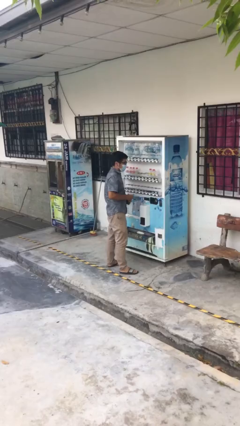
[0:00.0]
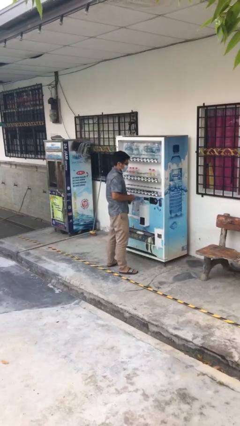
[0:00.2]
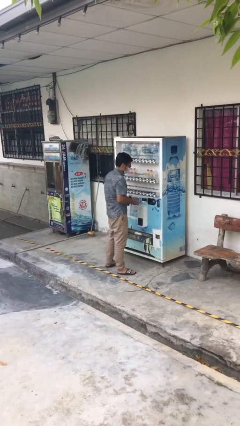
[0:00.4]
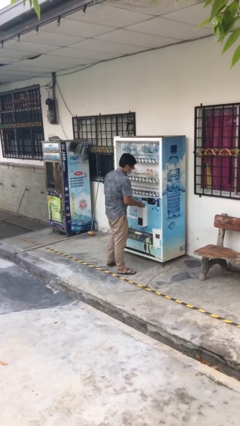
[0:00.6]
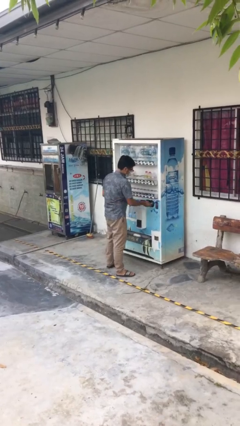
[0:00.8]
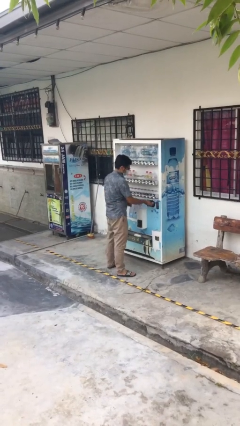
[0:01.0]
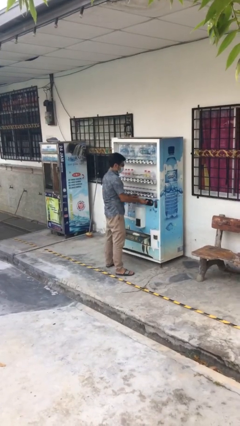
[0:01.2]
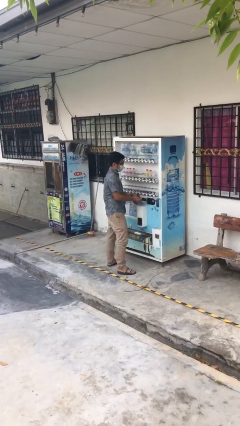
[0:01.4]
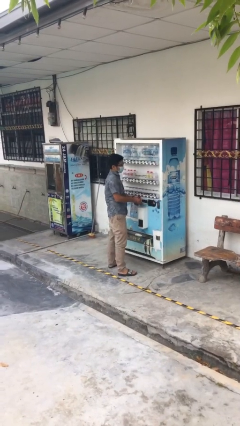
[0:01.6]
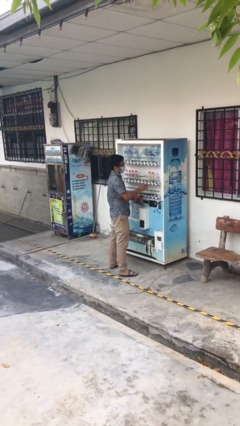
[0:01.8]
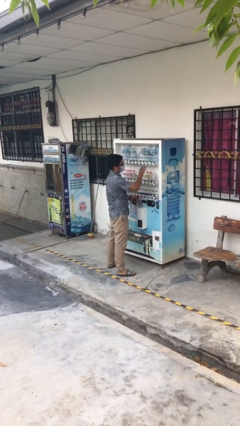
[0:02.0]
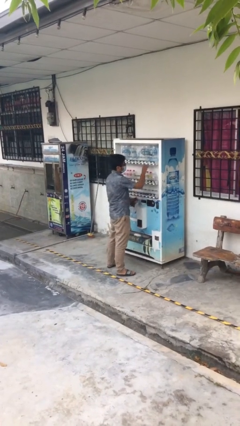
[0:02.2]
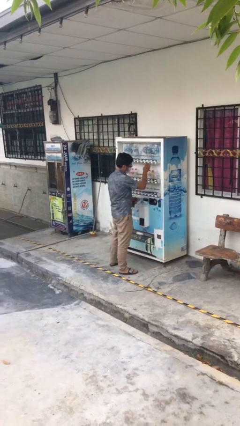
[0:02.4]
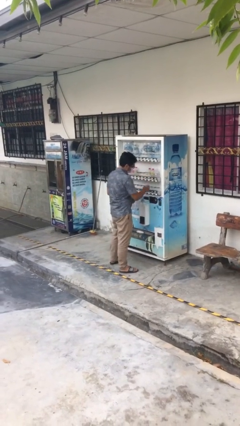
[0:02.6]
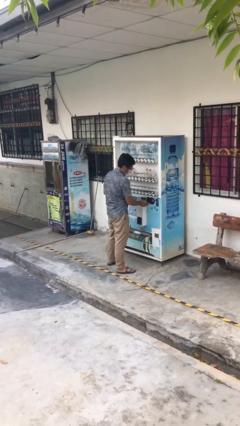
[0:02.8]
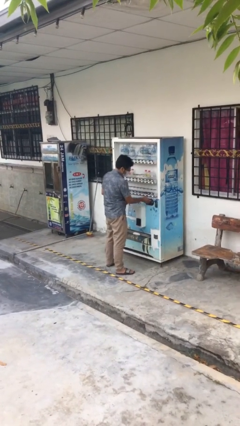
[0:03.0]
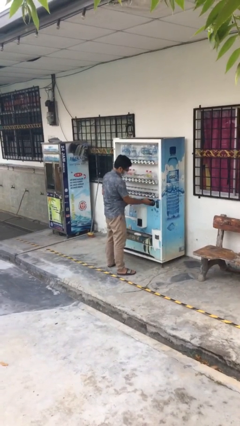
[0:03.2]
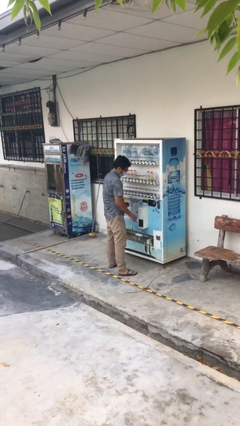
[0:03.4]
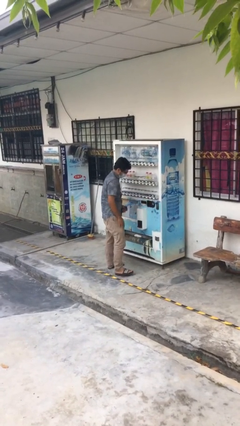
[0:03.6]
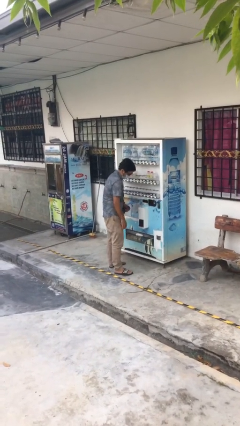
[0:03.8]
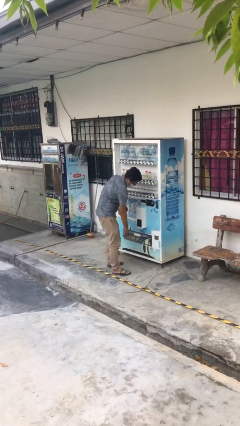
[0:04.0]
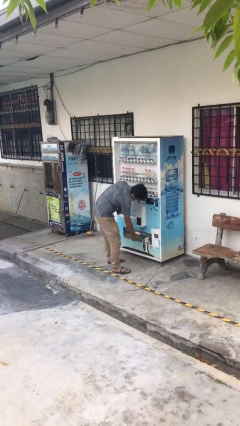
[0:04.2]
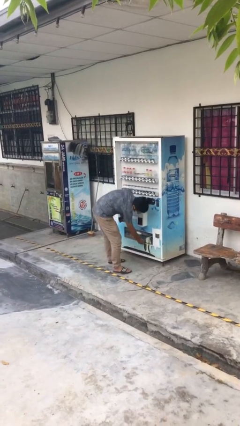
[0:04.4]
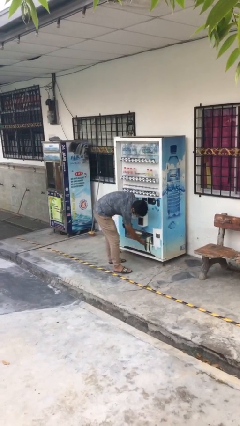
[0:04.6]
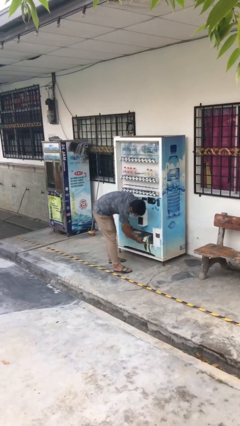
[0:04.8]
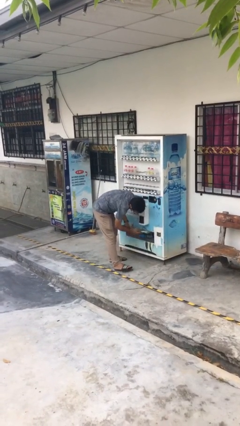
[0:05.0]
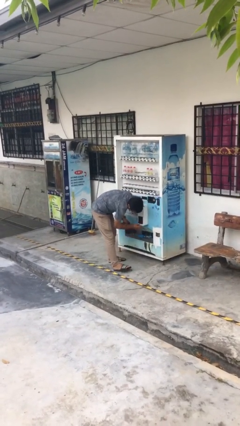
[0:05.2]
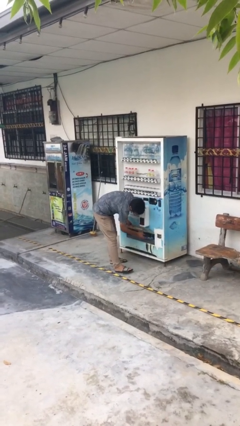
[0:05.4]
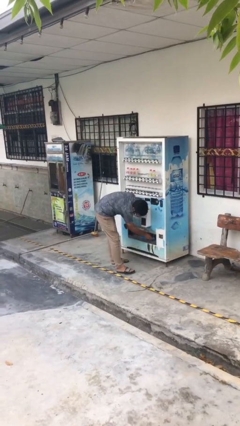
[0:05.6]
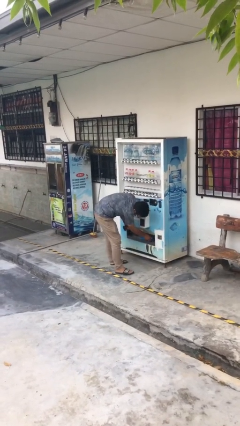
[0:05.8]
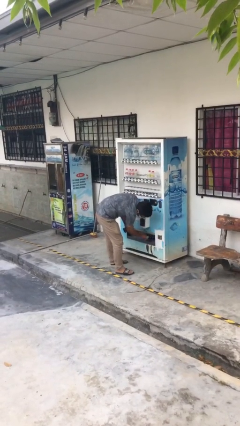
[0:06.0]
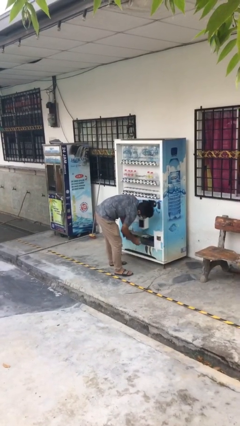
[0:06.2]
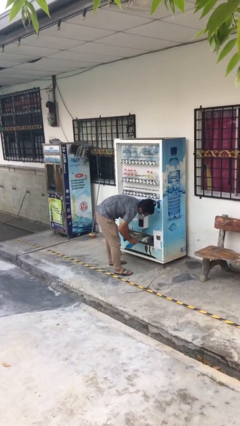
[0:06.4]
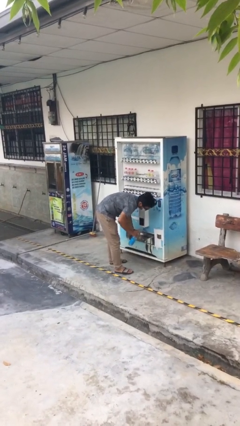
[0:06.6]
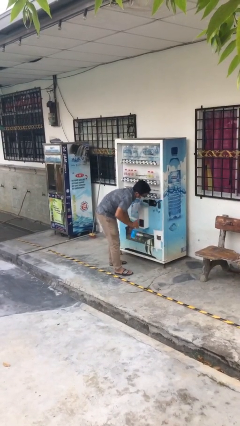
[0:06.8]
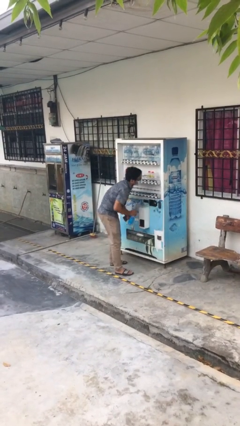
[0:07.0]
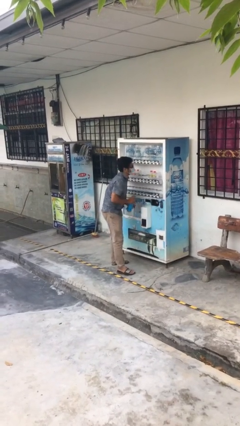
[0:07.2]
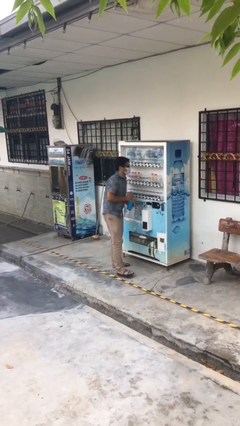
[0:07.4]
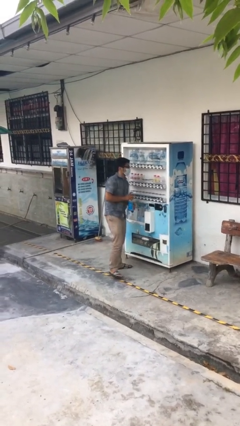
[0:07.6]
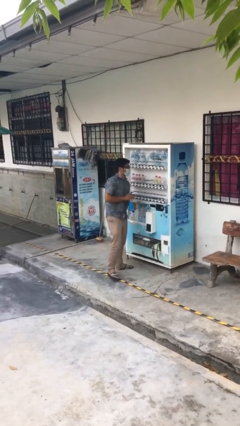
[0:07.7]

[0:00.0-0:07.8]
person purchases from machine

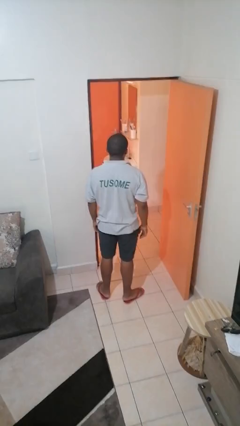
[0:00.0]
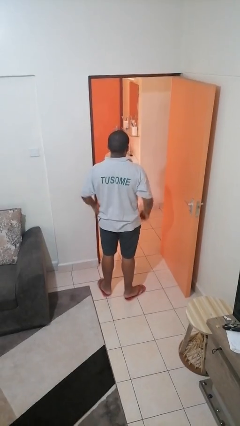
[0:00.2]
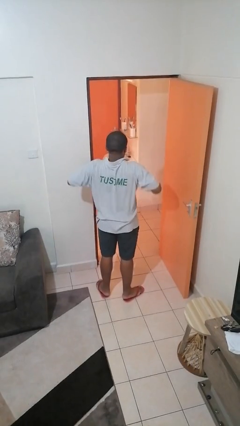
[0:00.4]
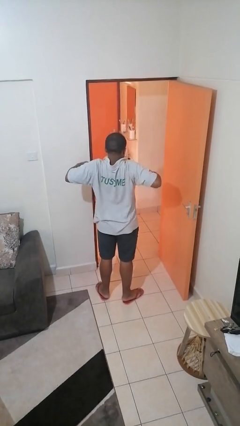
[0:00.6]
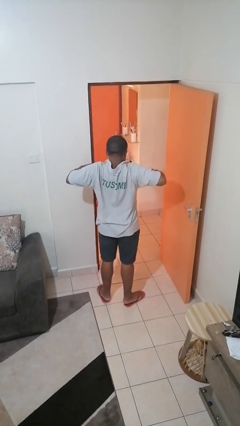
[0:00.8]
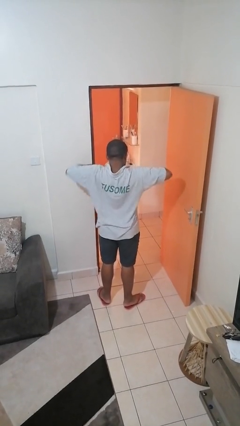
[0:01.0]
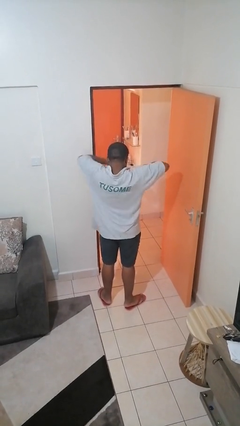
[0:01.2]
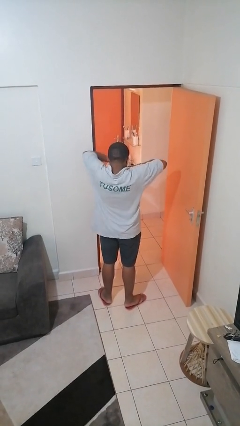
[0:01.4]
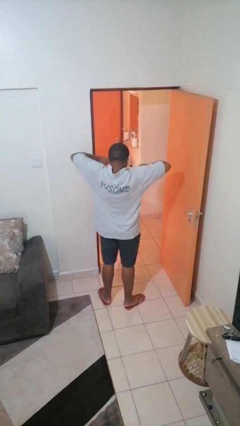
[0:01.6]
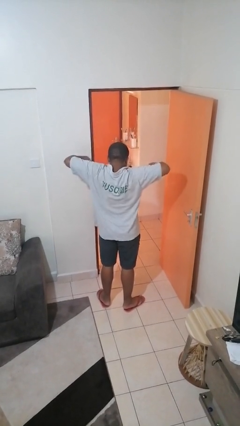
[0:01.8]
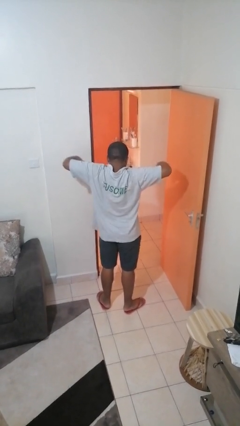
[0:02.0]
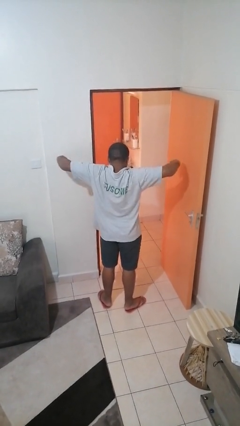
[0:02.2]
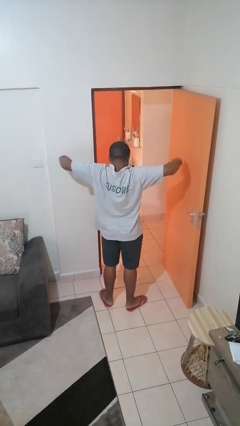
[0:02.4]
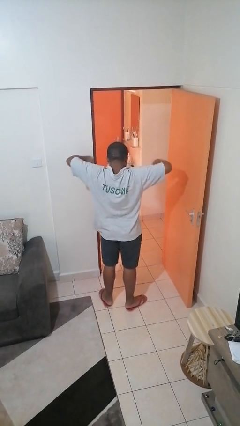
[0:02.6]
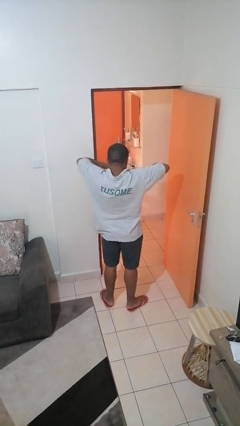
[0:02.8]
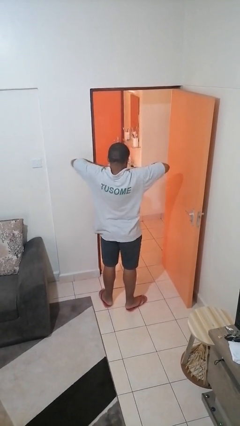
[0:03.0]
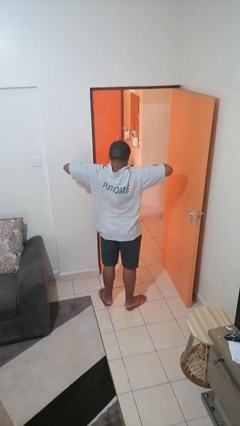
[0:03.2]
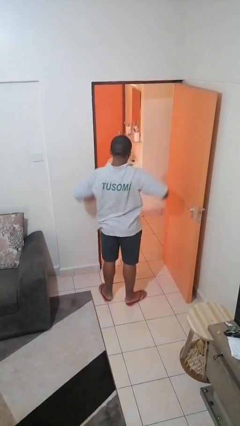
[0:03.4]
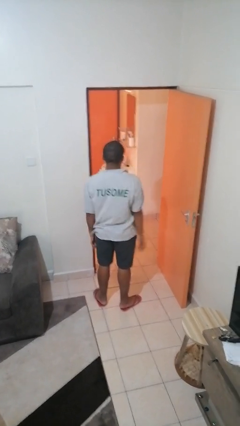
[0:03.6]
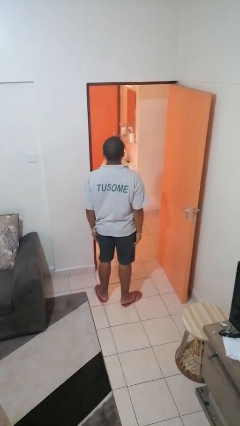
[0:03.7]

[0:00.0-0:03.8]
person stretches arms to side

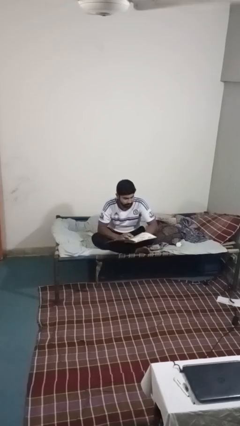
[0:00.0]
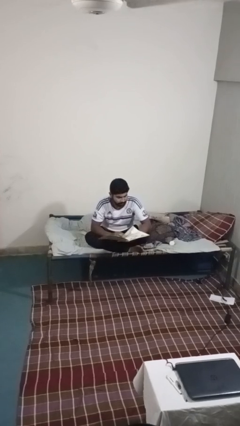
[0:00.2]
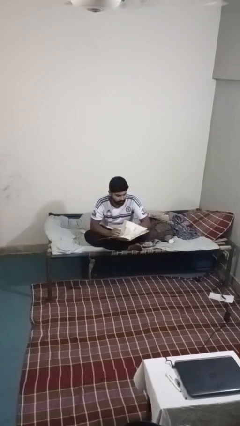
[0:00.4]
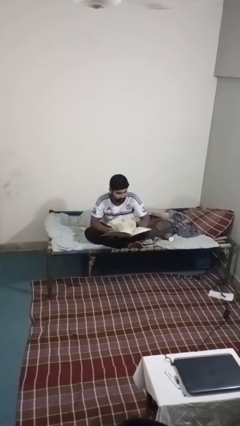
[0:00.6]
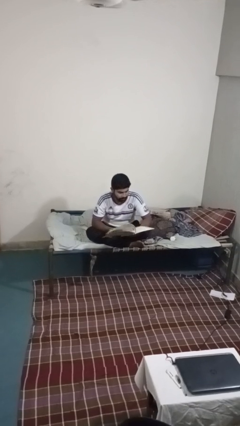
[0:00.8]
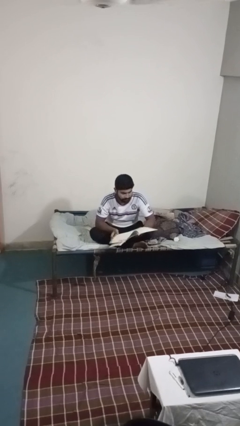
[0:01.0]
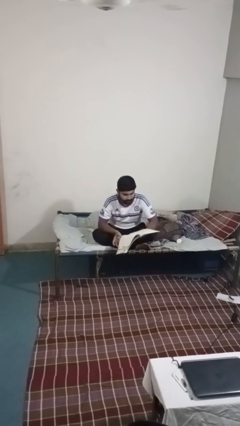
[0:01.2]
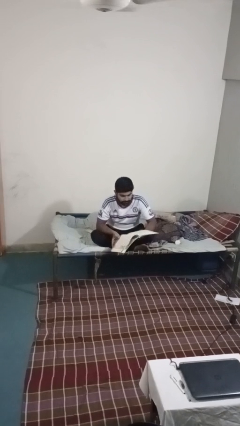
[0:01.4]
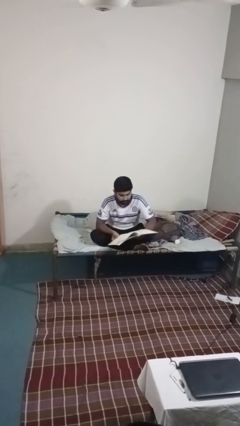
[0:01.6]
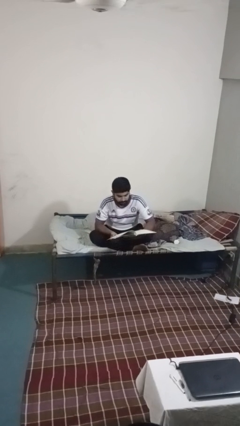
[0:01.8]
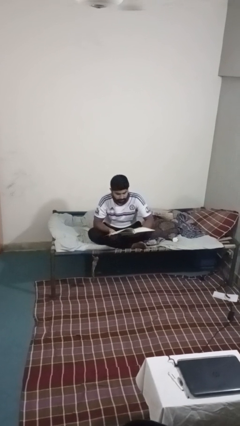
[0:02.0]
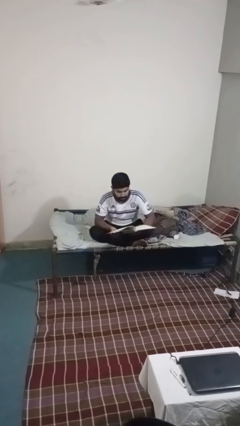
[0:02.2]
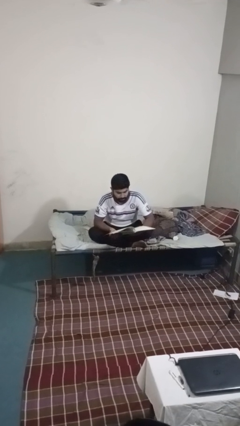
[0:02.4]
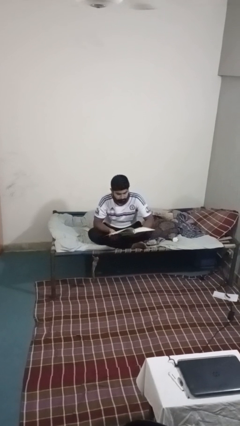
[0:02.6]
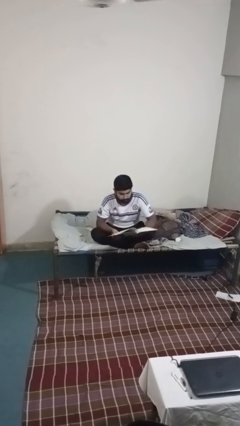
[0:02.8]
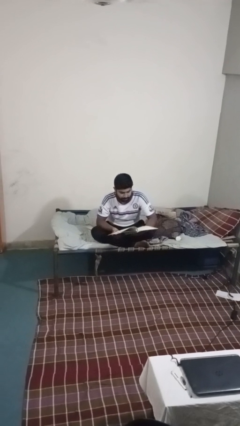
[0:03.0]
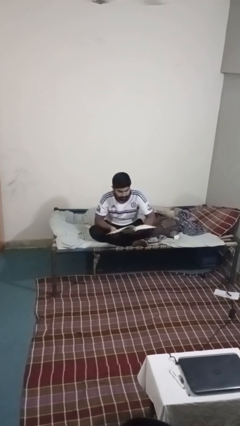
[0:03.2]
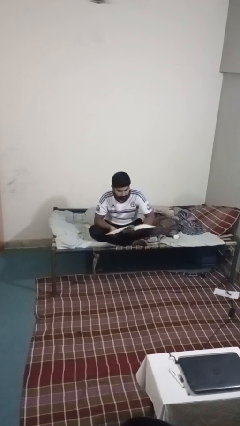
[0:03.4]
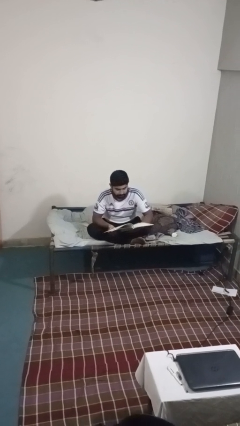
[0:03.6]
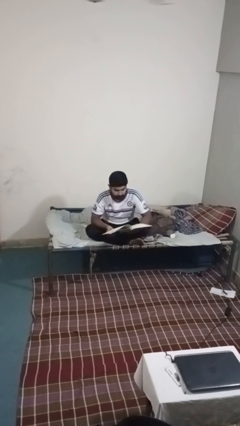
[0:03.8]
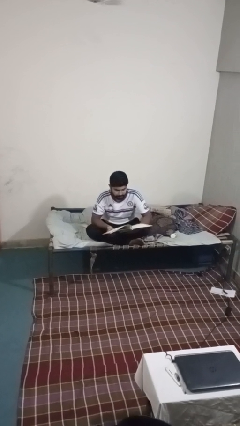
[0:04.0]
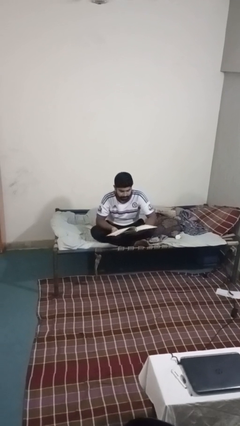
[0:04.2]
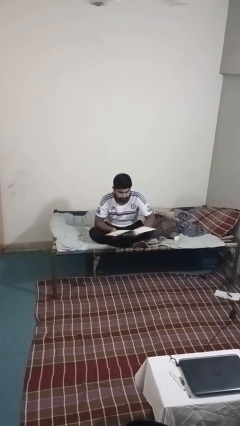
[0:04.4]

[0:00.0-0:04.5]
person reads magazine

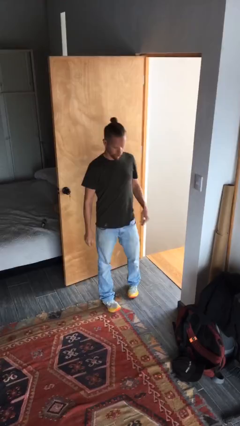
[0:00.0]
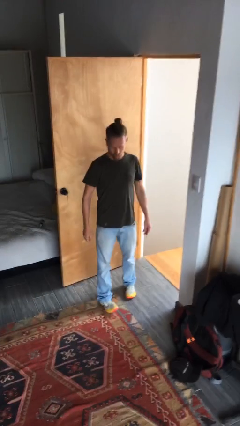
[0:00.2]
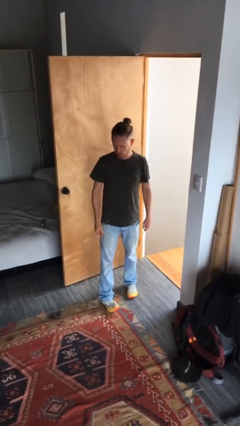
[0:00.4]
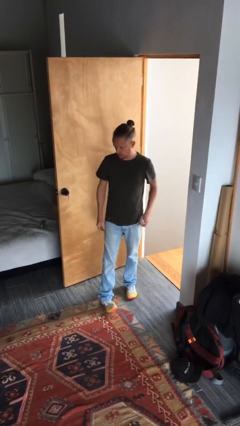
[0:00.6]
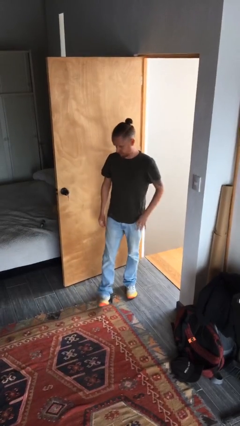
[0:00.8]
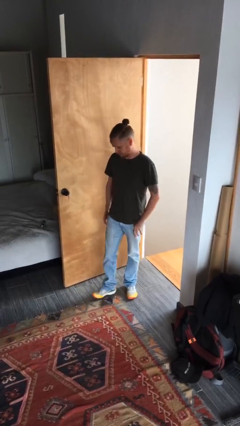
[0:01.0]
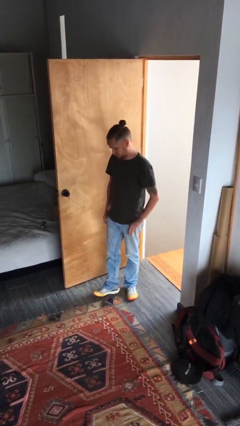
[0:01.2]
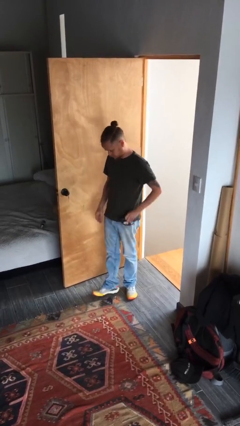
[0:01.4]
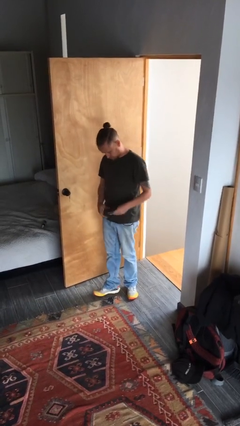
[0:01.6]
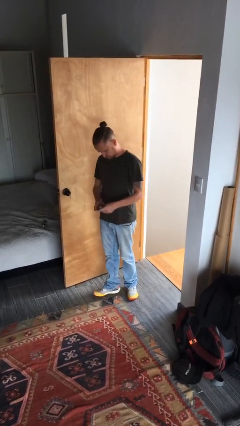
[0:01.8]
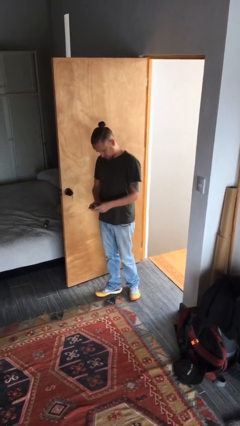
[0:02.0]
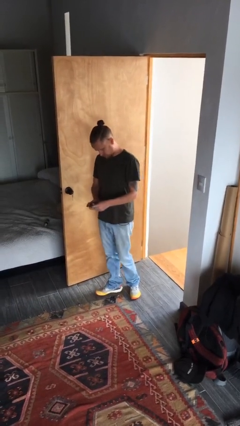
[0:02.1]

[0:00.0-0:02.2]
person takes phone from pocket
